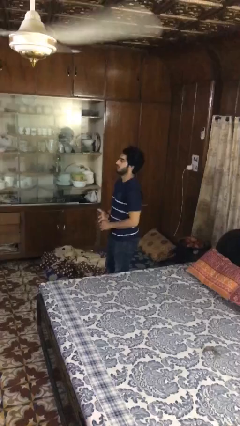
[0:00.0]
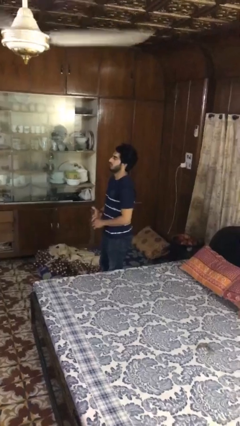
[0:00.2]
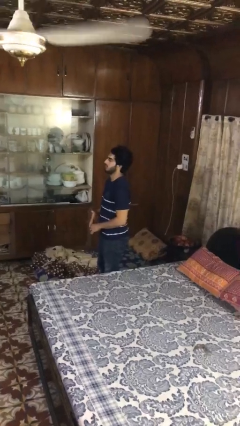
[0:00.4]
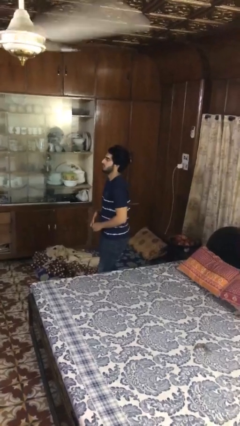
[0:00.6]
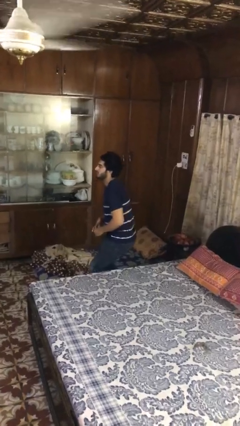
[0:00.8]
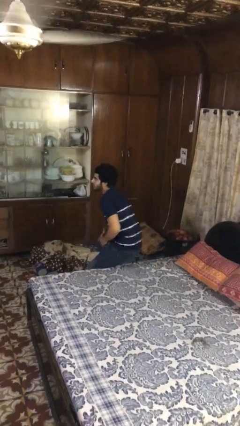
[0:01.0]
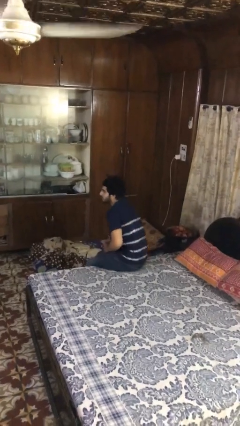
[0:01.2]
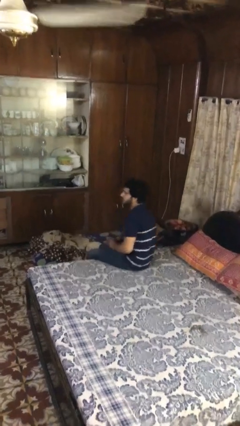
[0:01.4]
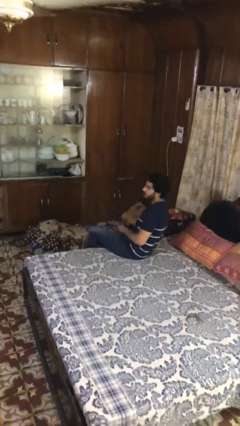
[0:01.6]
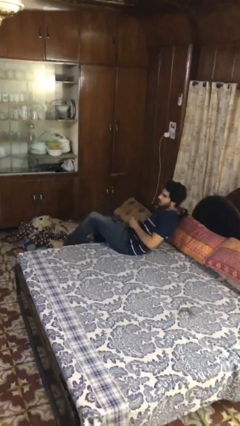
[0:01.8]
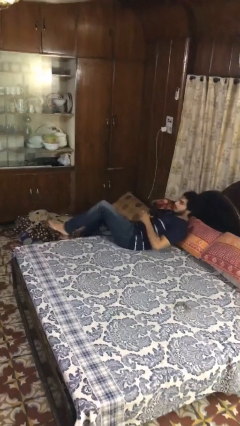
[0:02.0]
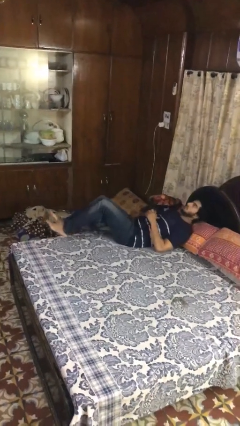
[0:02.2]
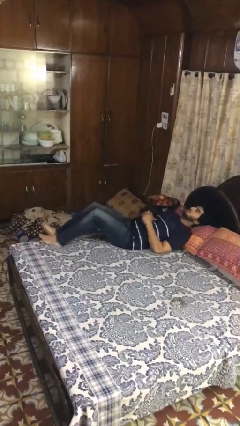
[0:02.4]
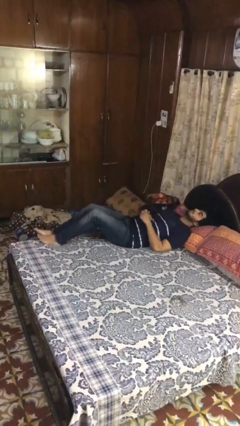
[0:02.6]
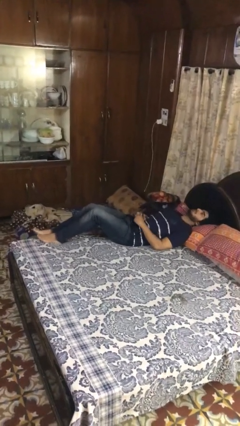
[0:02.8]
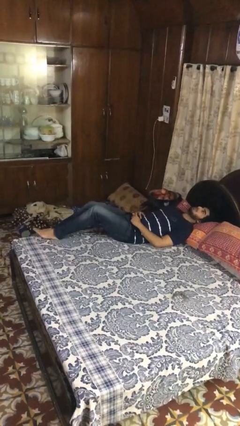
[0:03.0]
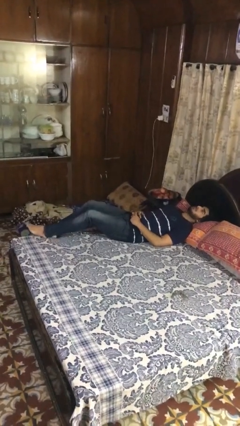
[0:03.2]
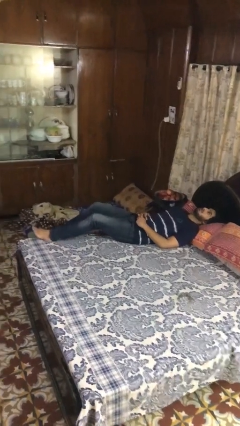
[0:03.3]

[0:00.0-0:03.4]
person lies down on bed

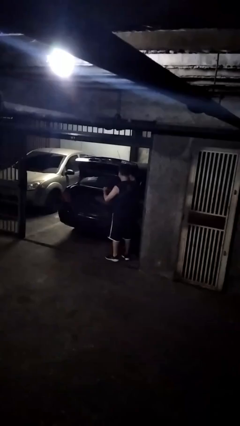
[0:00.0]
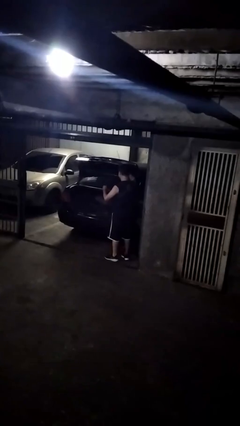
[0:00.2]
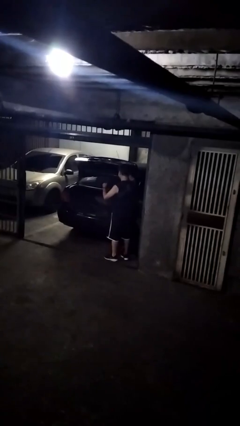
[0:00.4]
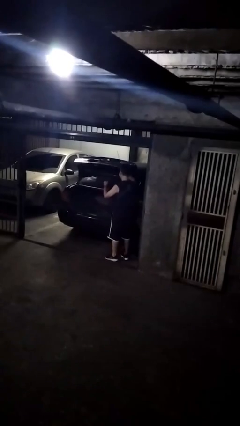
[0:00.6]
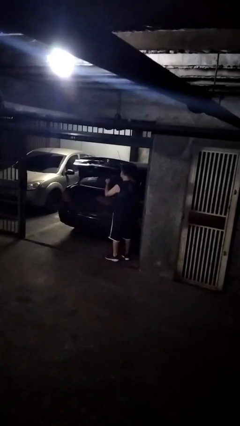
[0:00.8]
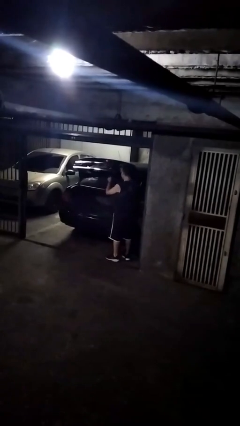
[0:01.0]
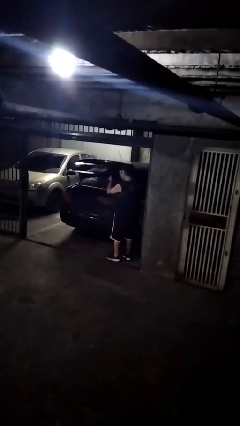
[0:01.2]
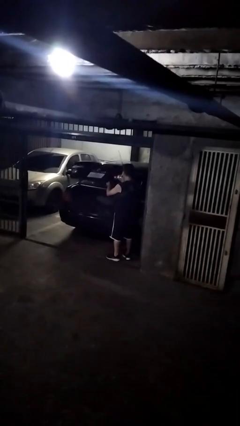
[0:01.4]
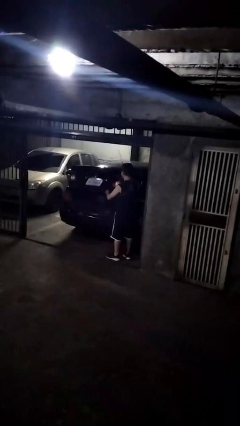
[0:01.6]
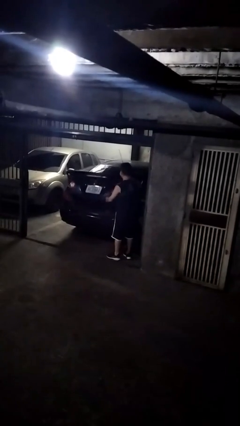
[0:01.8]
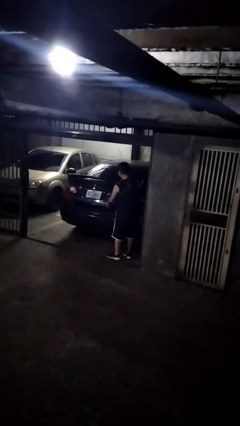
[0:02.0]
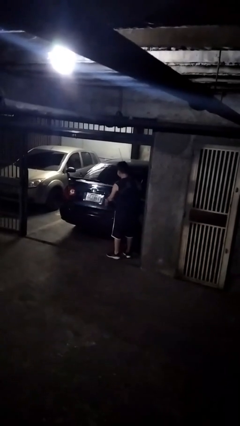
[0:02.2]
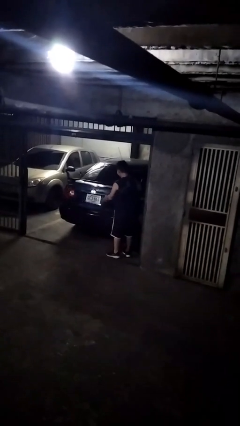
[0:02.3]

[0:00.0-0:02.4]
person closes car trunk

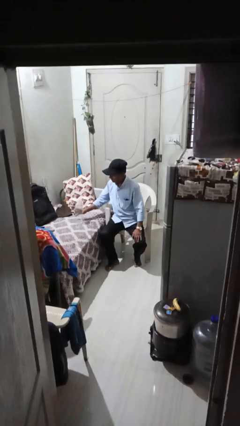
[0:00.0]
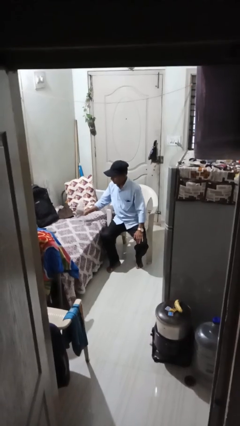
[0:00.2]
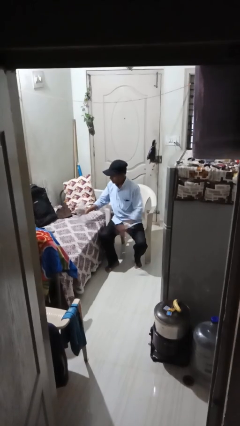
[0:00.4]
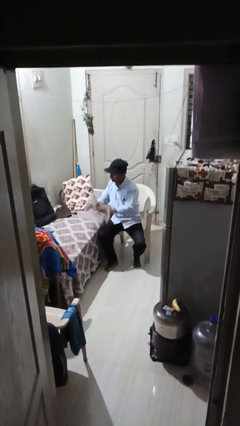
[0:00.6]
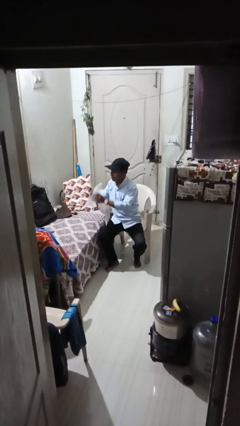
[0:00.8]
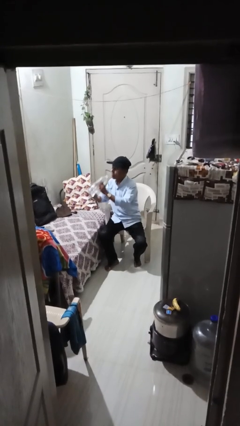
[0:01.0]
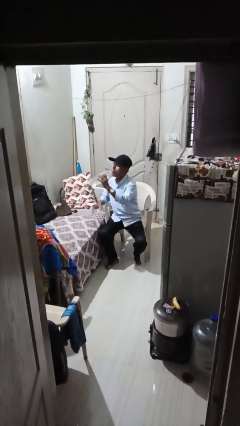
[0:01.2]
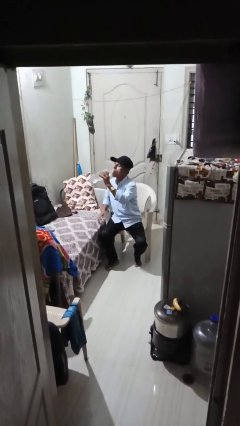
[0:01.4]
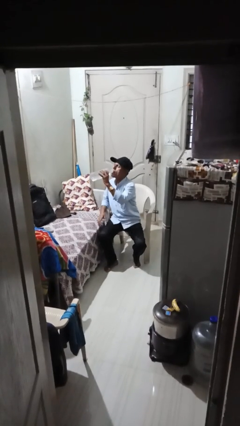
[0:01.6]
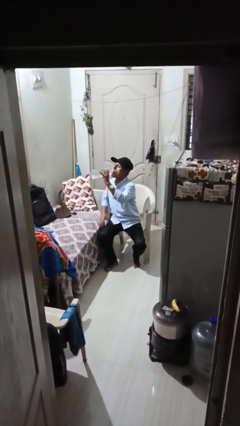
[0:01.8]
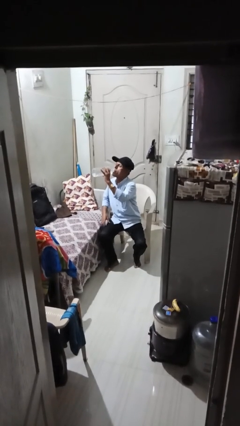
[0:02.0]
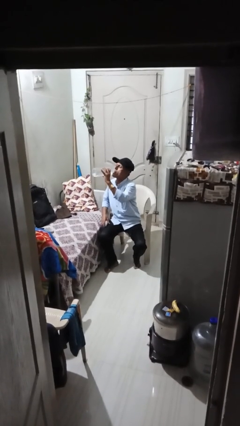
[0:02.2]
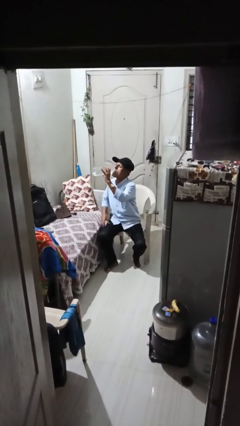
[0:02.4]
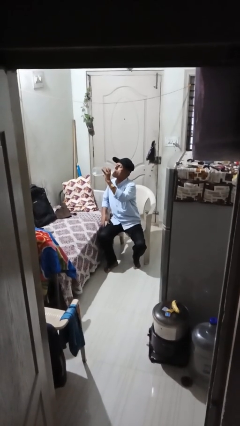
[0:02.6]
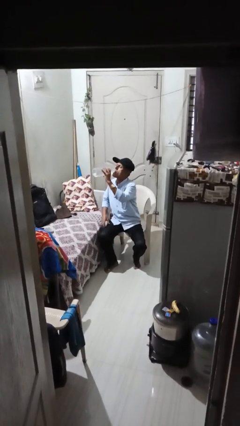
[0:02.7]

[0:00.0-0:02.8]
person drinks from bottle

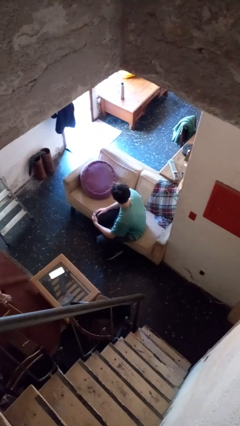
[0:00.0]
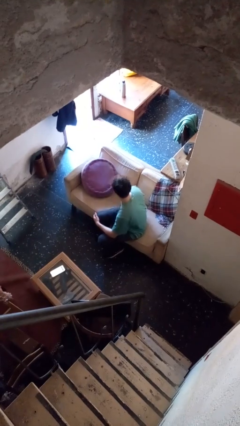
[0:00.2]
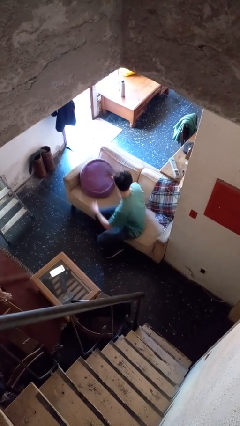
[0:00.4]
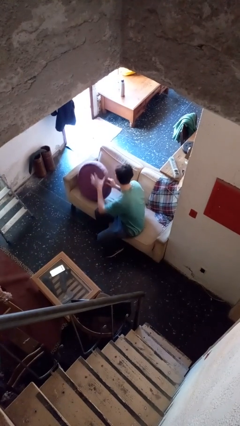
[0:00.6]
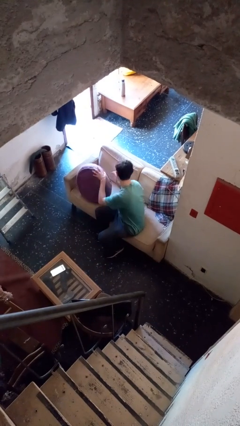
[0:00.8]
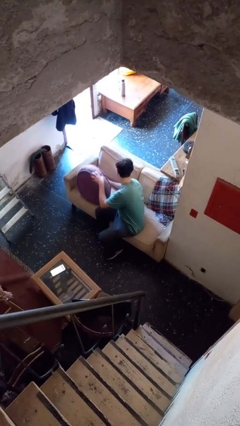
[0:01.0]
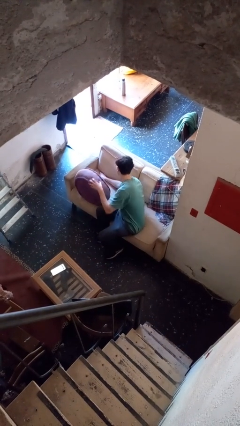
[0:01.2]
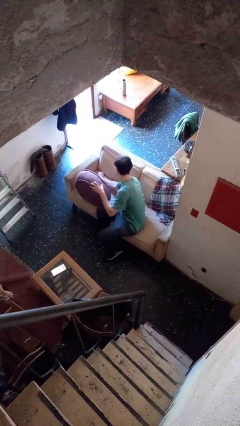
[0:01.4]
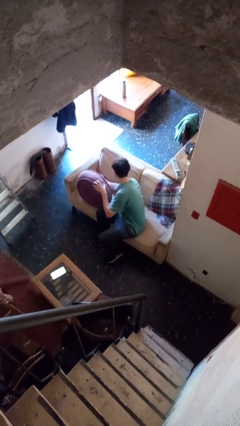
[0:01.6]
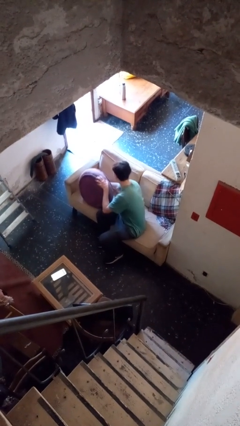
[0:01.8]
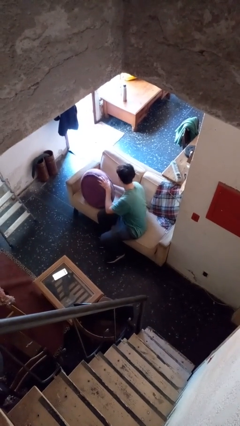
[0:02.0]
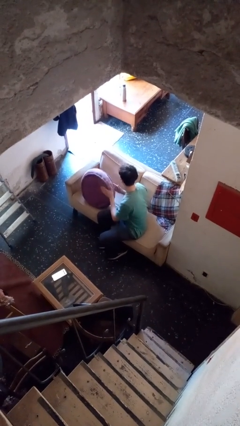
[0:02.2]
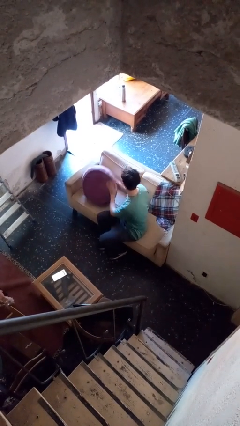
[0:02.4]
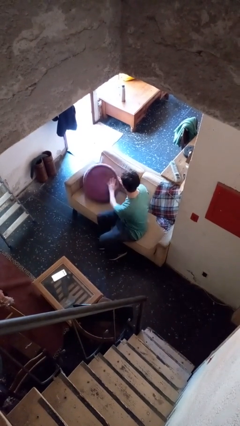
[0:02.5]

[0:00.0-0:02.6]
person searches in couch

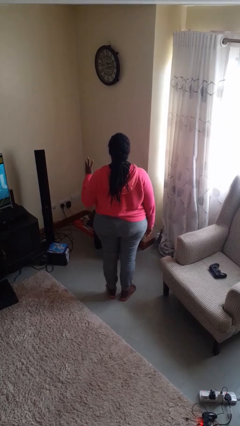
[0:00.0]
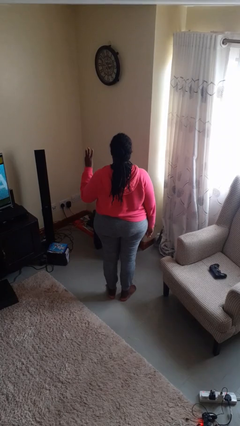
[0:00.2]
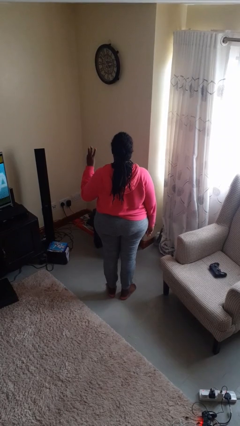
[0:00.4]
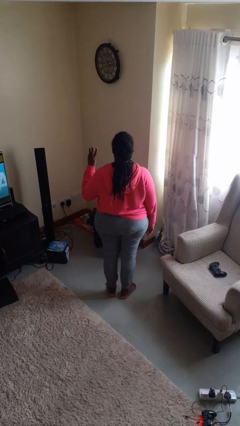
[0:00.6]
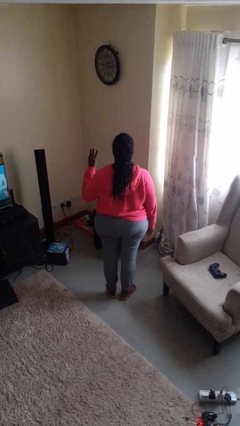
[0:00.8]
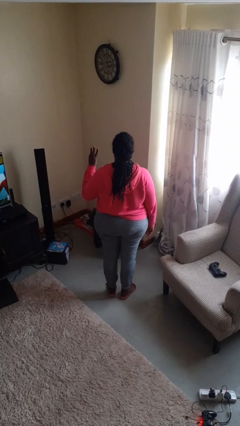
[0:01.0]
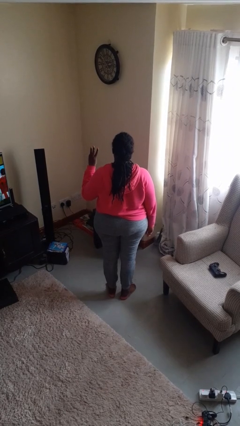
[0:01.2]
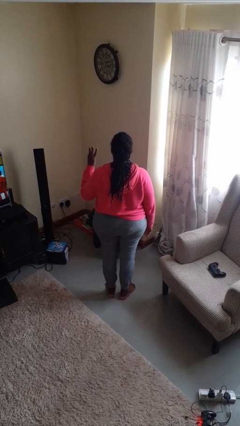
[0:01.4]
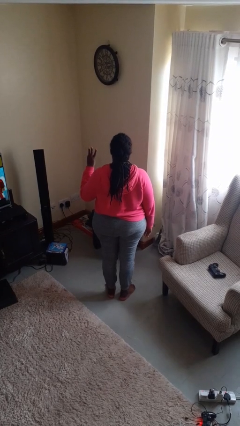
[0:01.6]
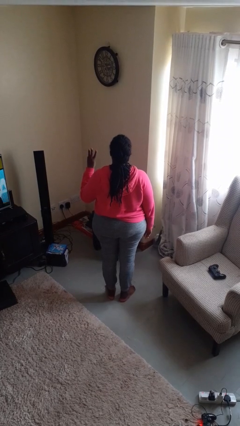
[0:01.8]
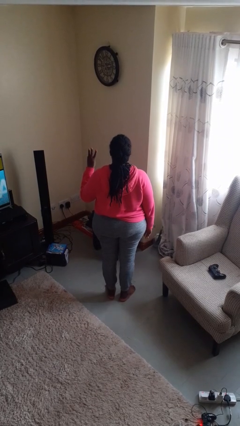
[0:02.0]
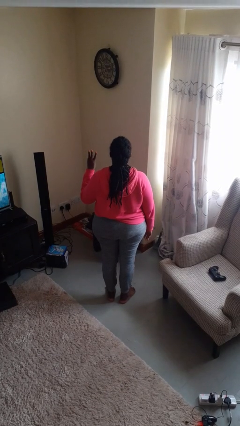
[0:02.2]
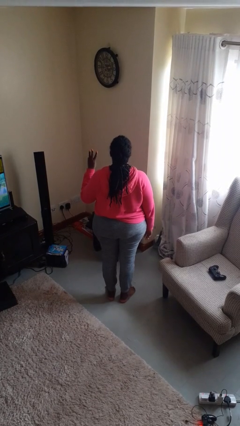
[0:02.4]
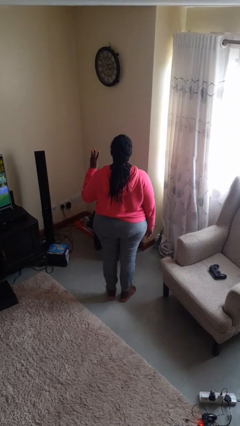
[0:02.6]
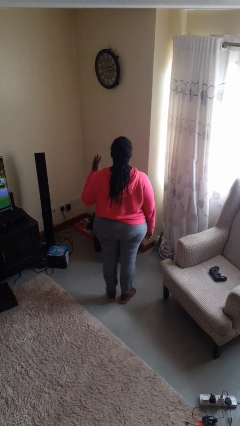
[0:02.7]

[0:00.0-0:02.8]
person gestures number three

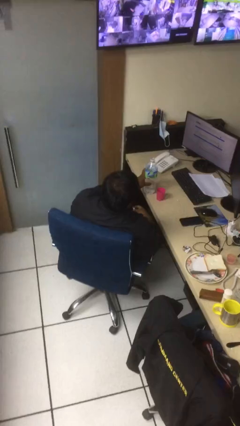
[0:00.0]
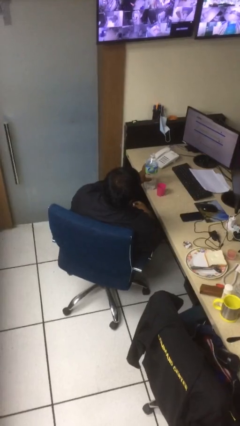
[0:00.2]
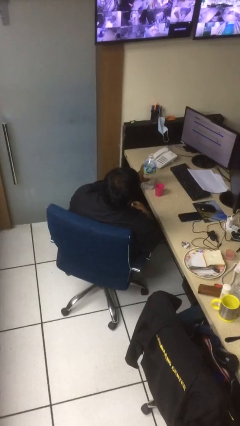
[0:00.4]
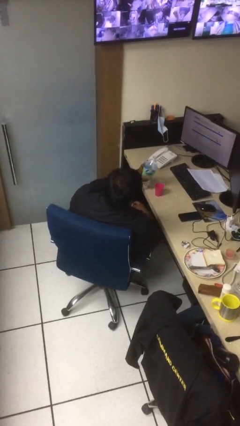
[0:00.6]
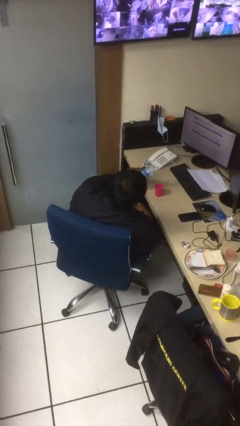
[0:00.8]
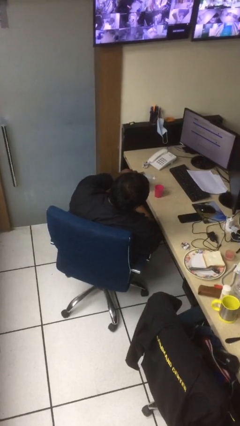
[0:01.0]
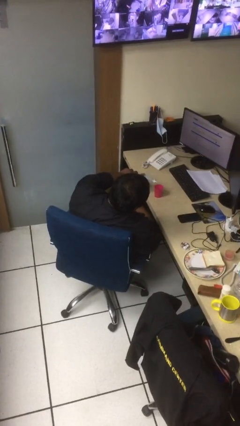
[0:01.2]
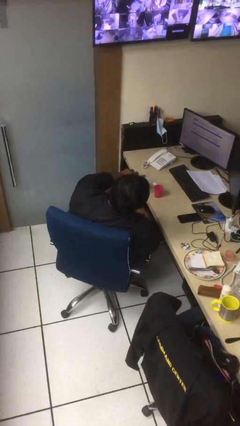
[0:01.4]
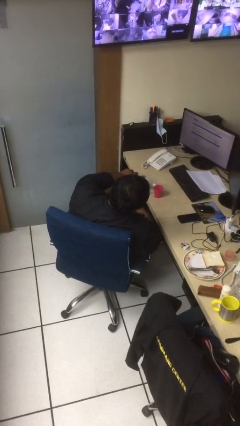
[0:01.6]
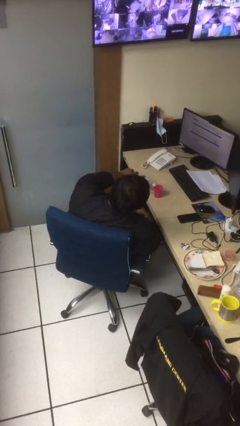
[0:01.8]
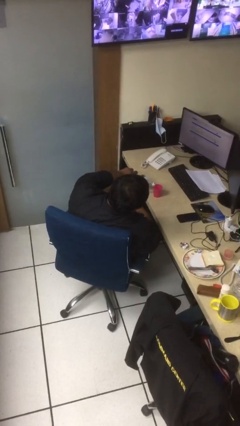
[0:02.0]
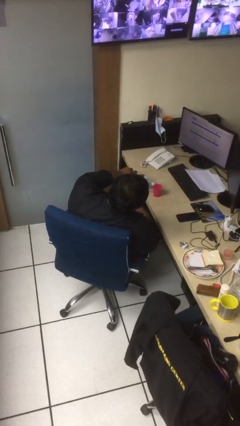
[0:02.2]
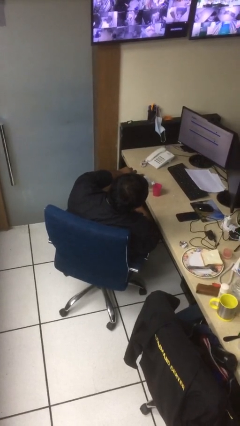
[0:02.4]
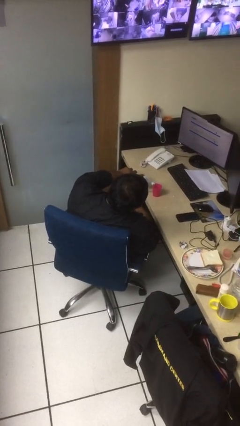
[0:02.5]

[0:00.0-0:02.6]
person pours liquid into cup
